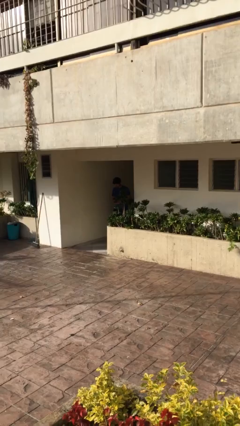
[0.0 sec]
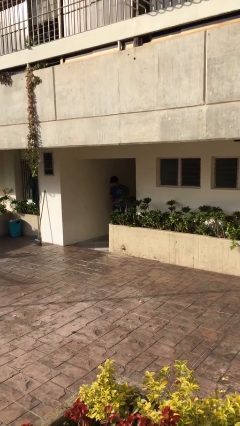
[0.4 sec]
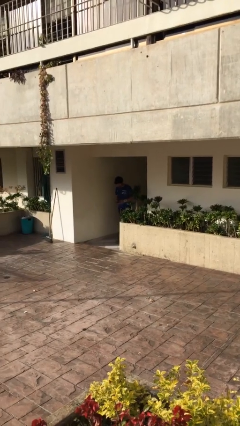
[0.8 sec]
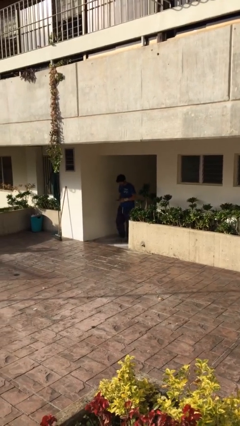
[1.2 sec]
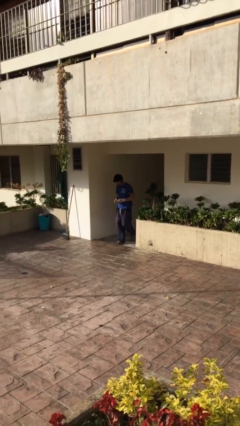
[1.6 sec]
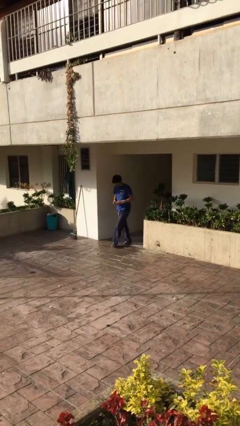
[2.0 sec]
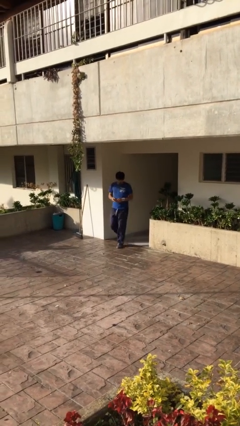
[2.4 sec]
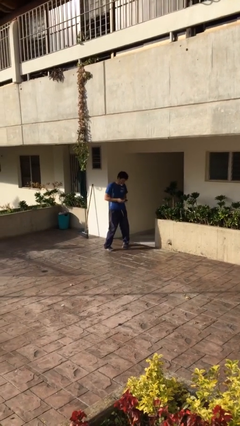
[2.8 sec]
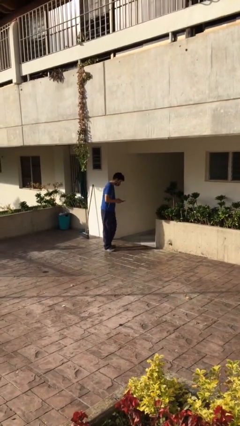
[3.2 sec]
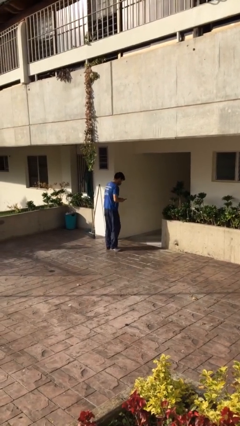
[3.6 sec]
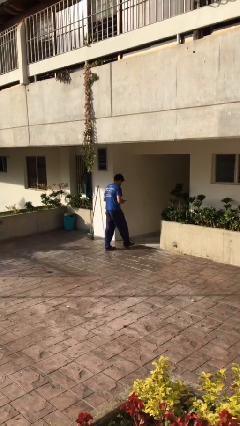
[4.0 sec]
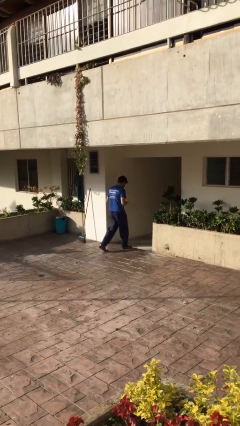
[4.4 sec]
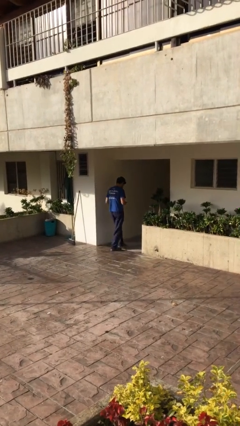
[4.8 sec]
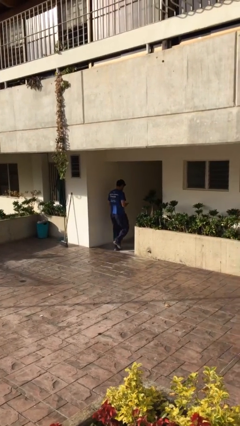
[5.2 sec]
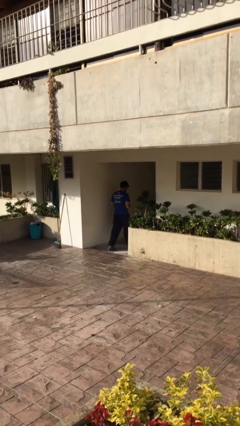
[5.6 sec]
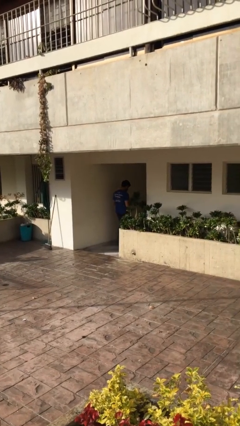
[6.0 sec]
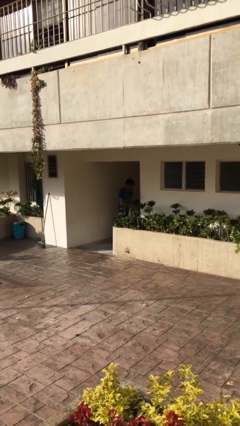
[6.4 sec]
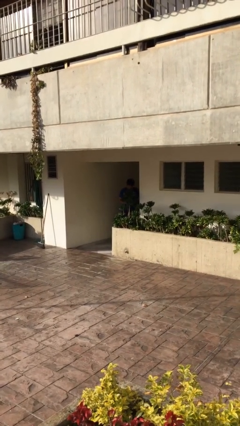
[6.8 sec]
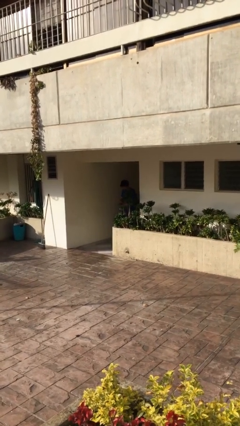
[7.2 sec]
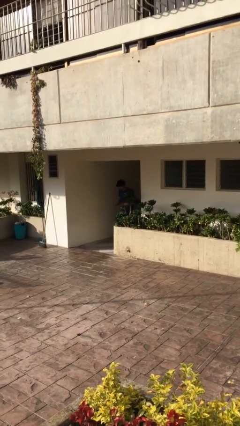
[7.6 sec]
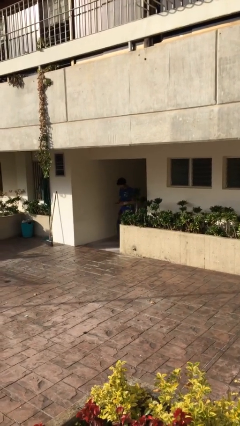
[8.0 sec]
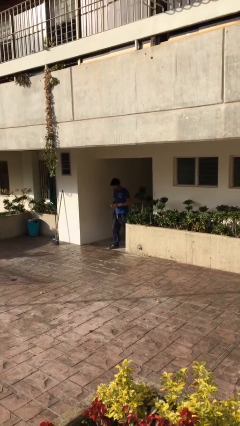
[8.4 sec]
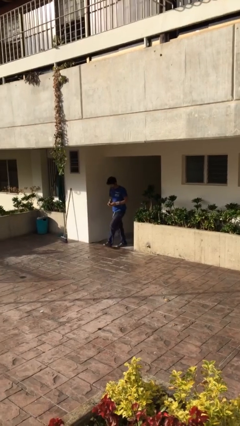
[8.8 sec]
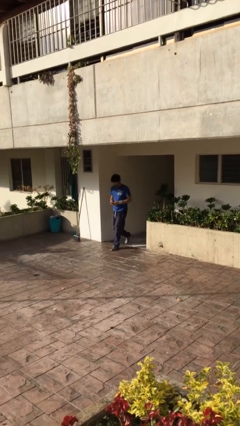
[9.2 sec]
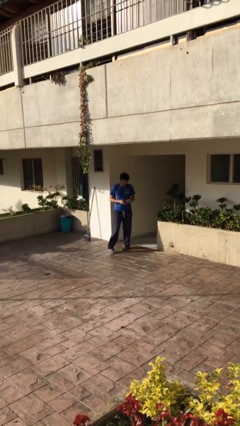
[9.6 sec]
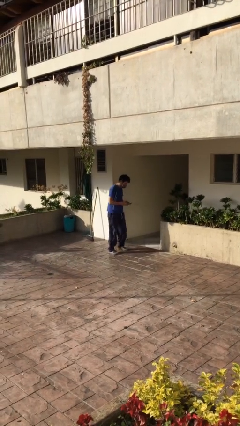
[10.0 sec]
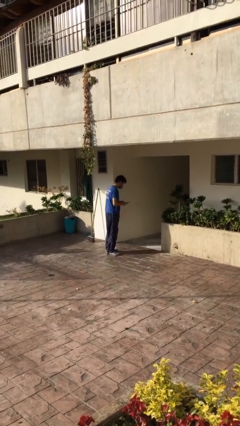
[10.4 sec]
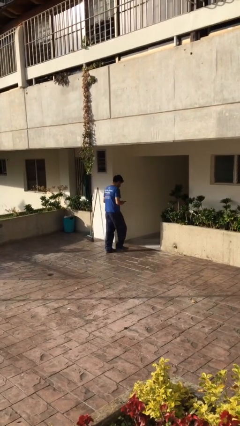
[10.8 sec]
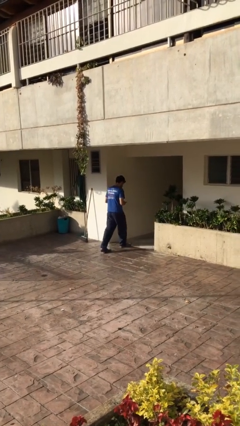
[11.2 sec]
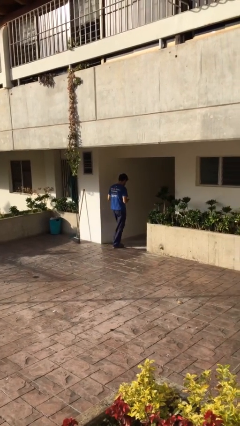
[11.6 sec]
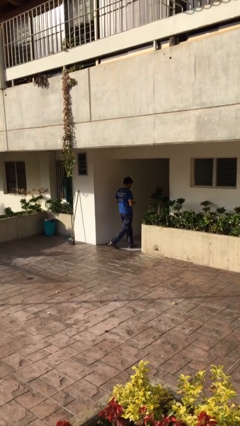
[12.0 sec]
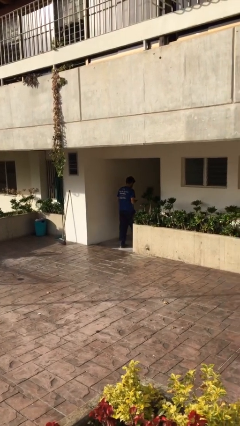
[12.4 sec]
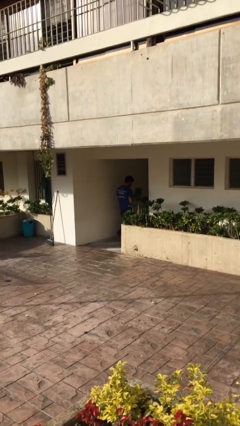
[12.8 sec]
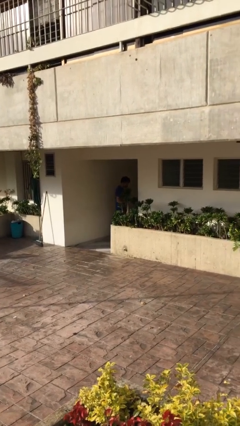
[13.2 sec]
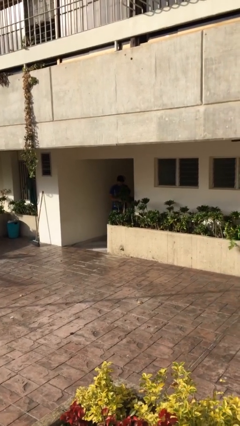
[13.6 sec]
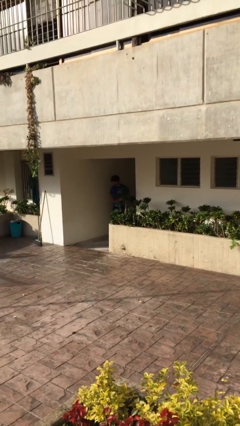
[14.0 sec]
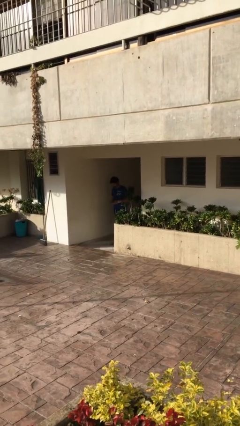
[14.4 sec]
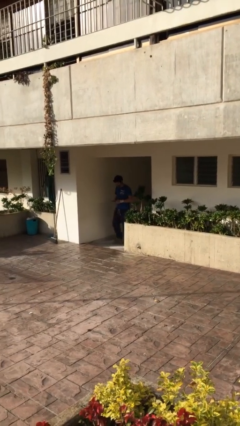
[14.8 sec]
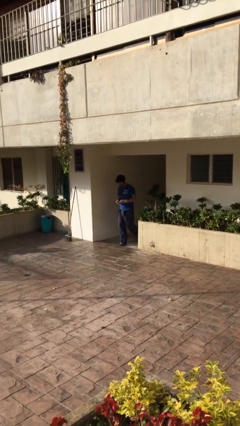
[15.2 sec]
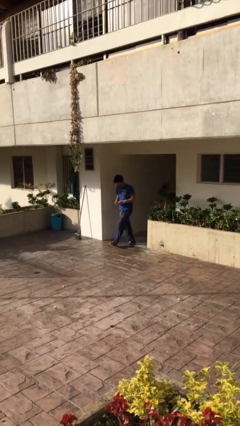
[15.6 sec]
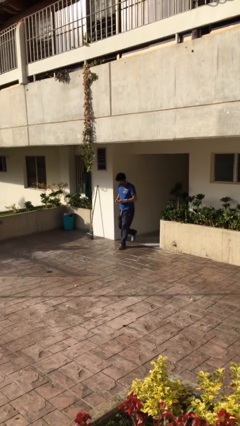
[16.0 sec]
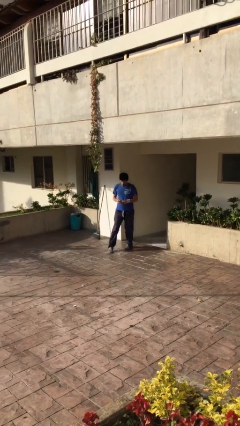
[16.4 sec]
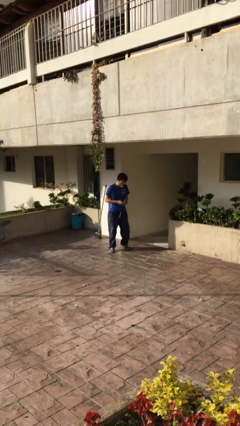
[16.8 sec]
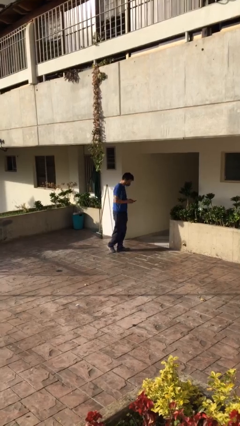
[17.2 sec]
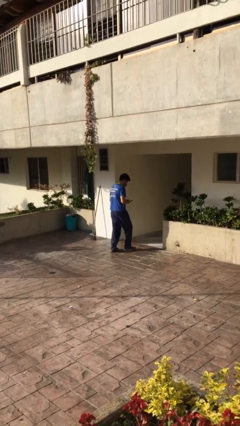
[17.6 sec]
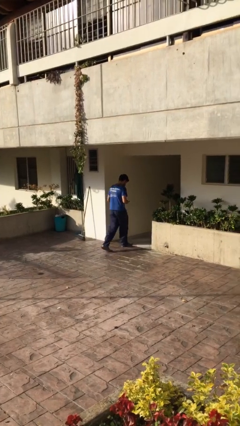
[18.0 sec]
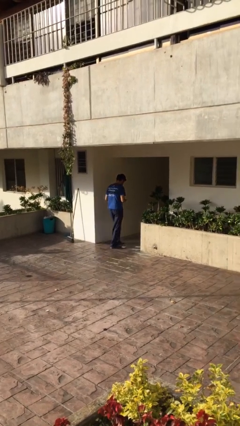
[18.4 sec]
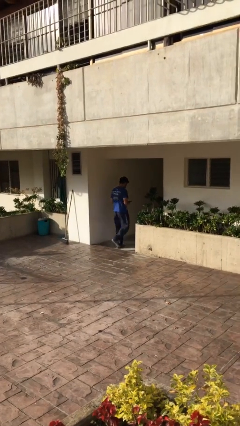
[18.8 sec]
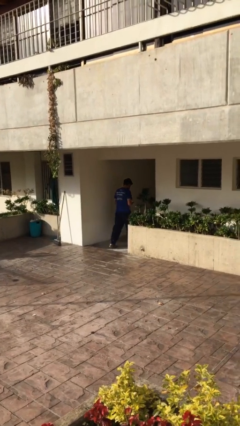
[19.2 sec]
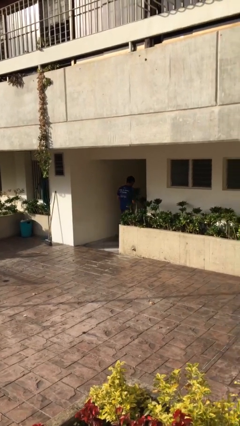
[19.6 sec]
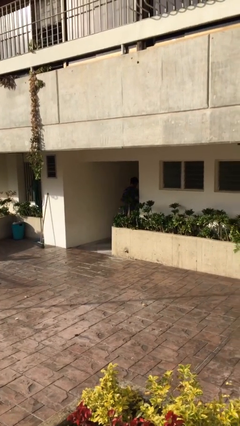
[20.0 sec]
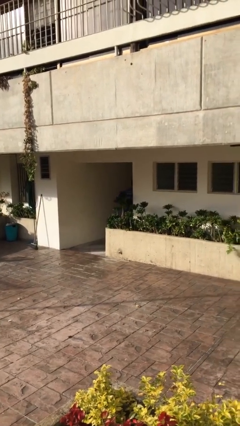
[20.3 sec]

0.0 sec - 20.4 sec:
person texts on phone

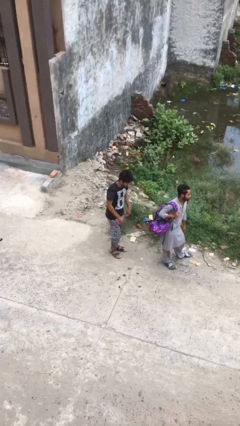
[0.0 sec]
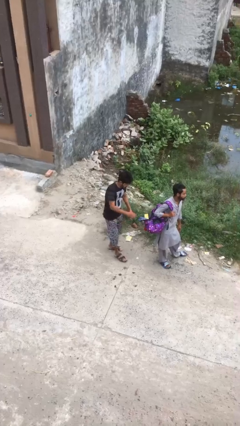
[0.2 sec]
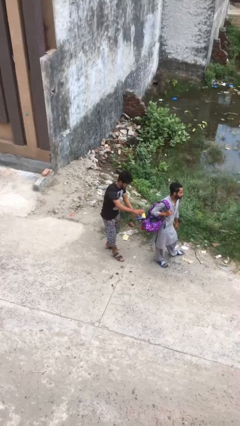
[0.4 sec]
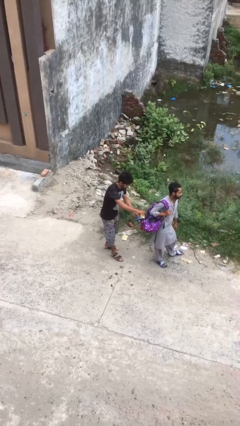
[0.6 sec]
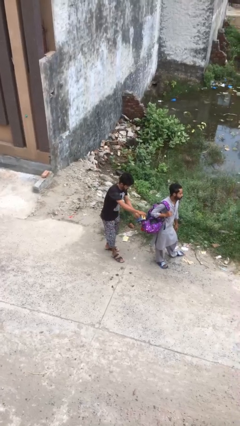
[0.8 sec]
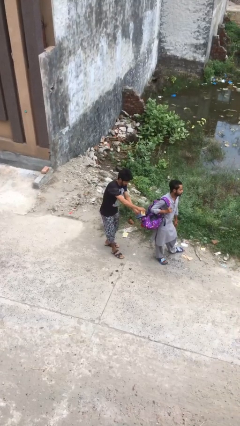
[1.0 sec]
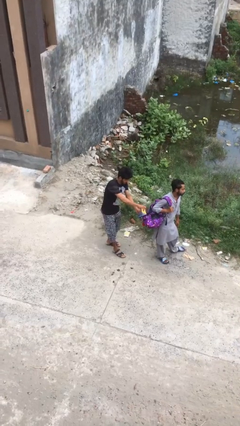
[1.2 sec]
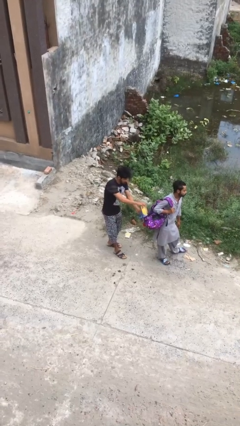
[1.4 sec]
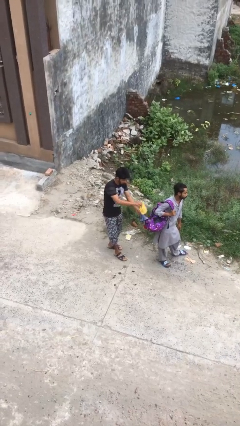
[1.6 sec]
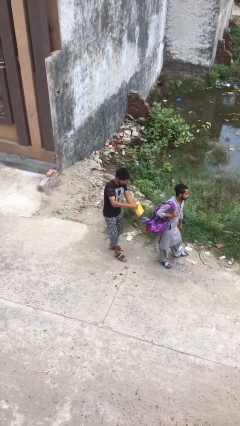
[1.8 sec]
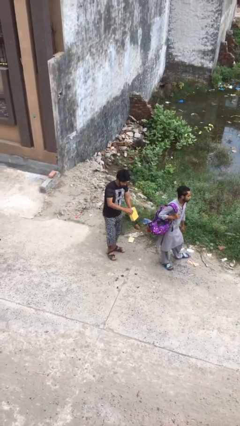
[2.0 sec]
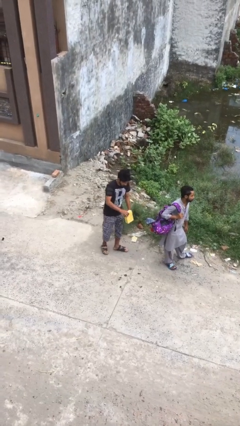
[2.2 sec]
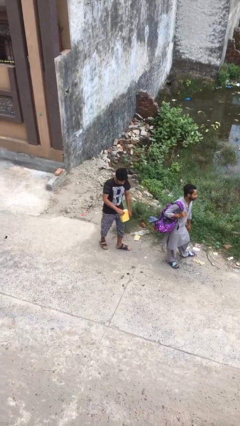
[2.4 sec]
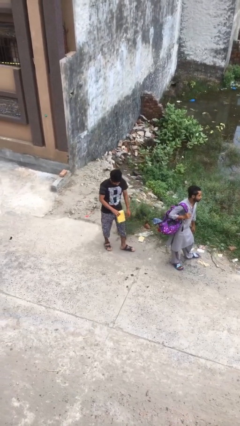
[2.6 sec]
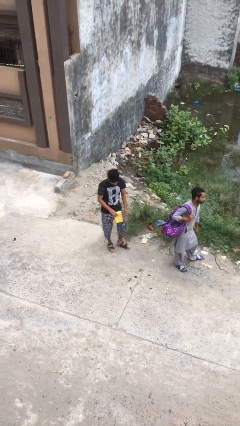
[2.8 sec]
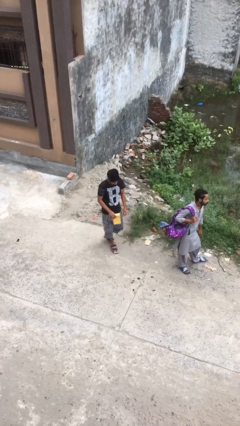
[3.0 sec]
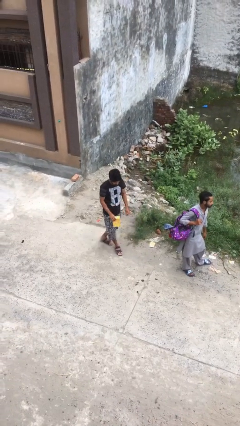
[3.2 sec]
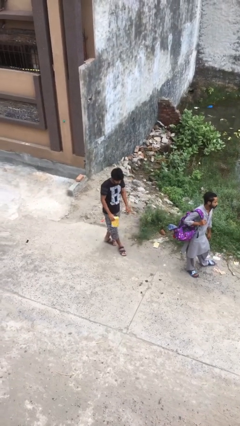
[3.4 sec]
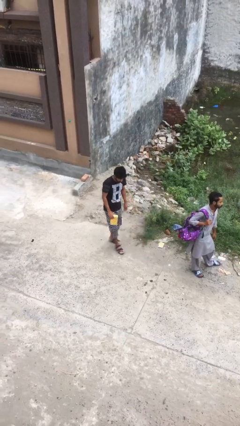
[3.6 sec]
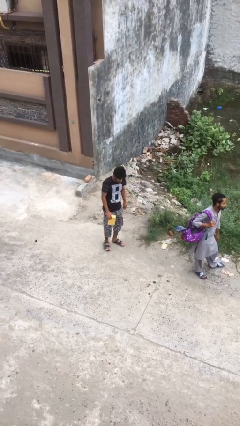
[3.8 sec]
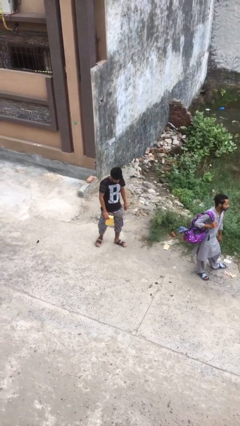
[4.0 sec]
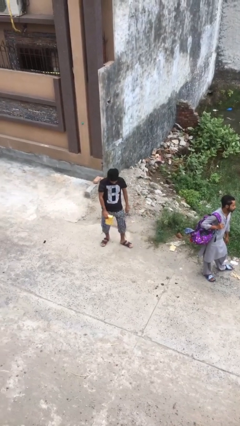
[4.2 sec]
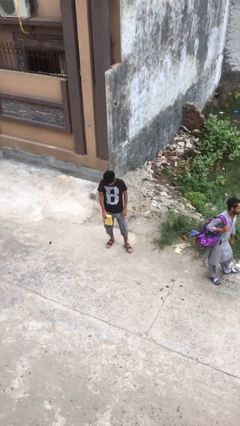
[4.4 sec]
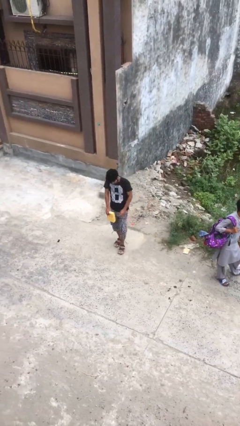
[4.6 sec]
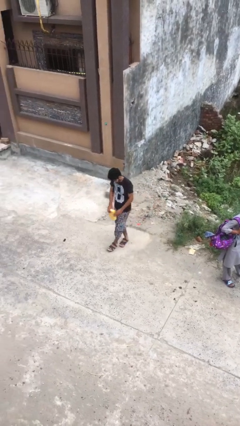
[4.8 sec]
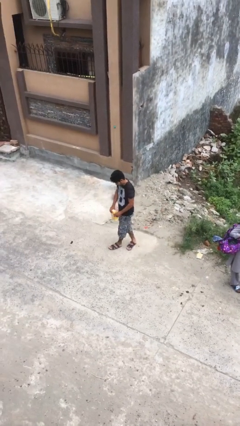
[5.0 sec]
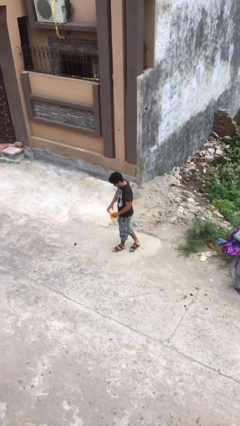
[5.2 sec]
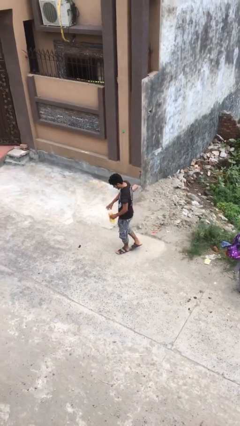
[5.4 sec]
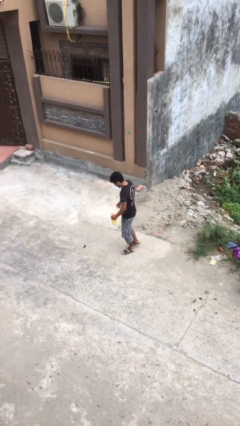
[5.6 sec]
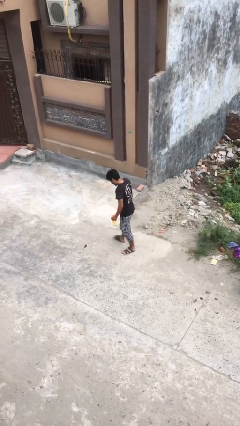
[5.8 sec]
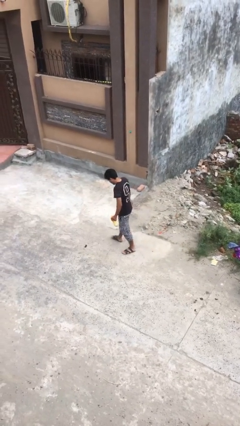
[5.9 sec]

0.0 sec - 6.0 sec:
person steals object from person

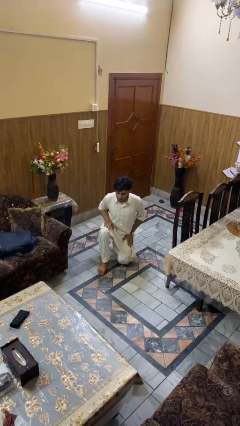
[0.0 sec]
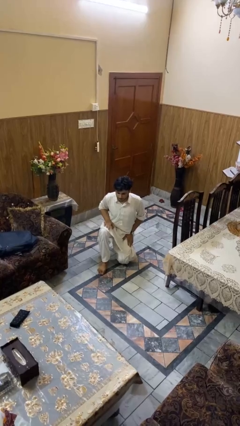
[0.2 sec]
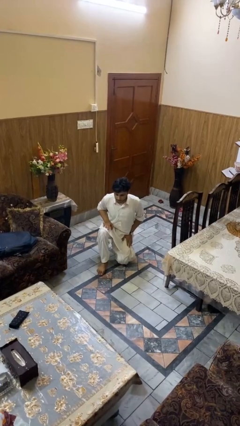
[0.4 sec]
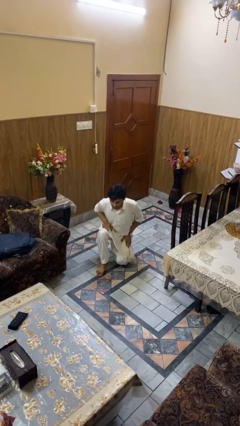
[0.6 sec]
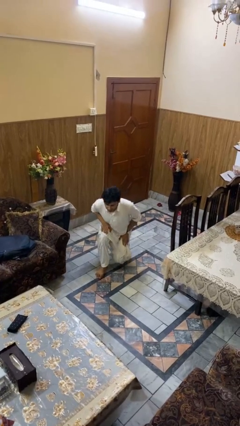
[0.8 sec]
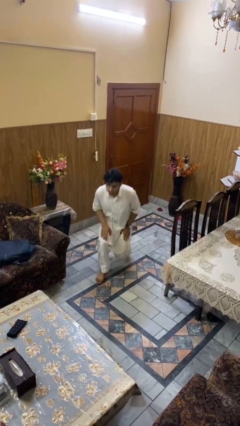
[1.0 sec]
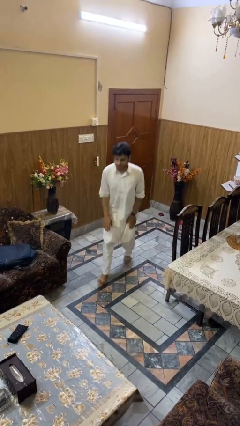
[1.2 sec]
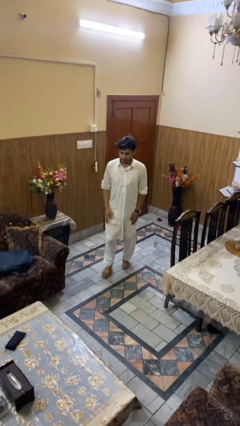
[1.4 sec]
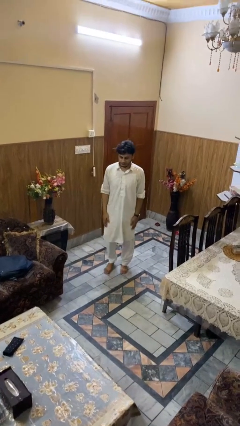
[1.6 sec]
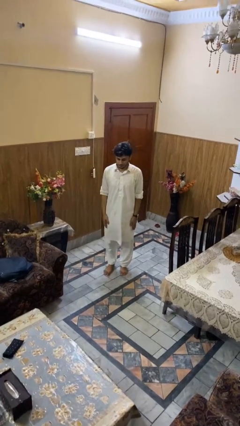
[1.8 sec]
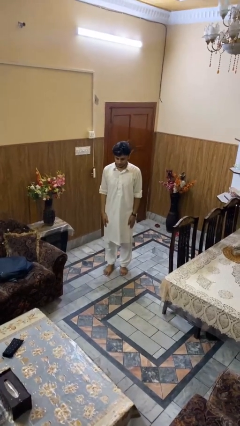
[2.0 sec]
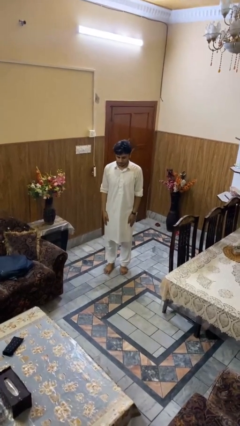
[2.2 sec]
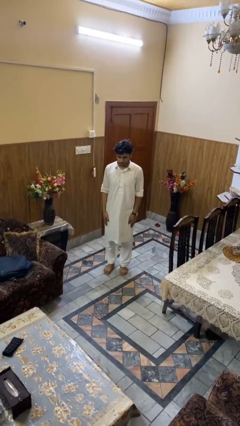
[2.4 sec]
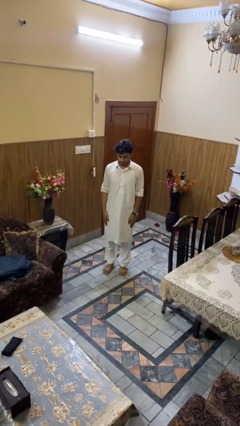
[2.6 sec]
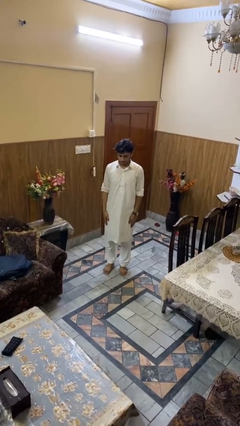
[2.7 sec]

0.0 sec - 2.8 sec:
person stands up from floor
